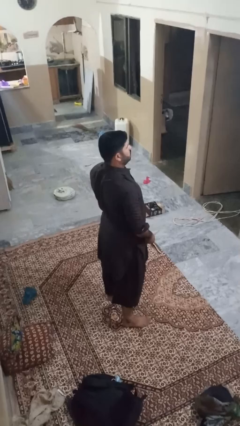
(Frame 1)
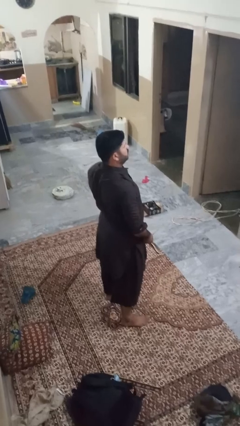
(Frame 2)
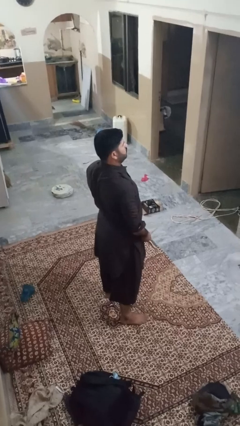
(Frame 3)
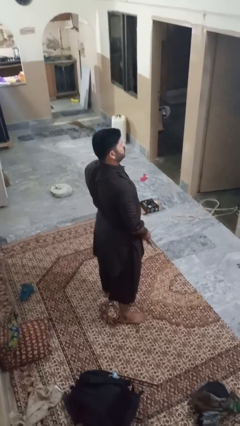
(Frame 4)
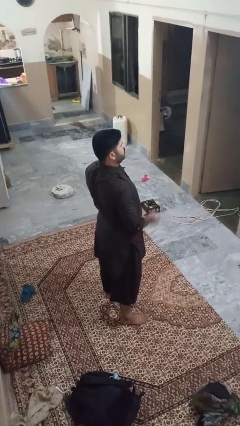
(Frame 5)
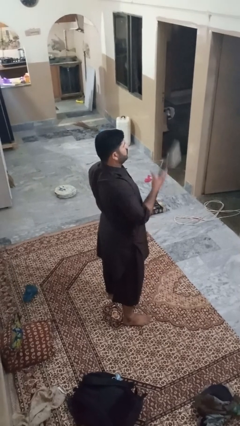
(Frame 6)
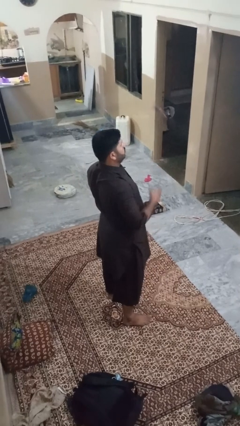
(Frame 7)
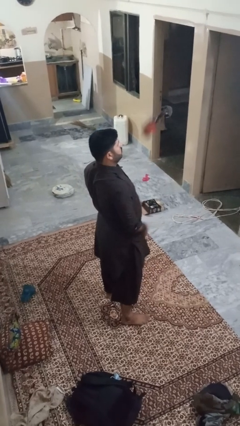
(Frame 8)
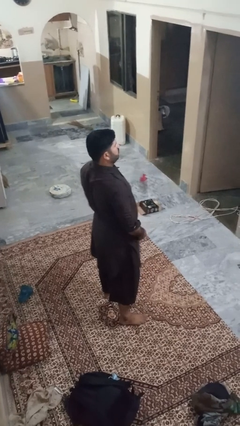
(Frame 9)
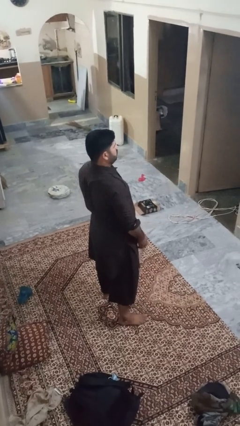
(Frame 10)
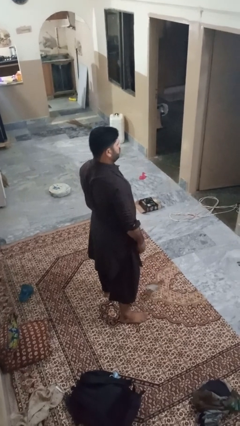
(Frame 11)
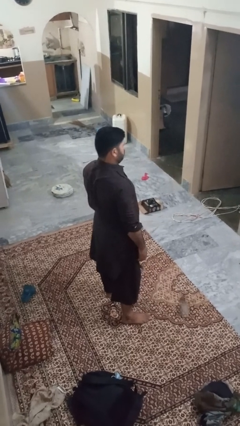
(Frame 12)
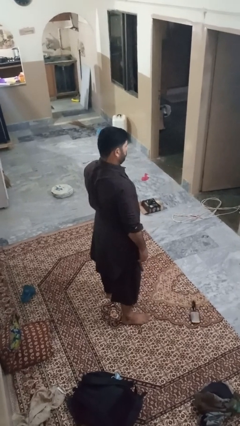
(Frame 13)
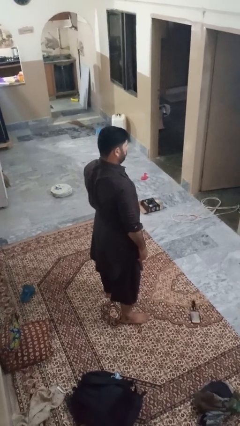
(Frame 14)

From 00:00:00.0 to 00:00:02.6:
person throws object into air

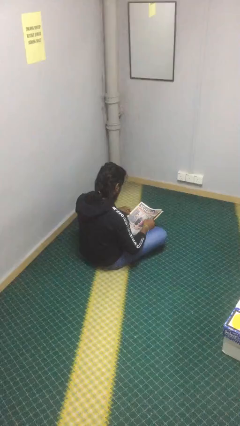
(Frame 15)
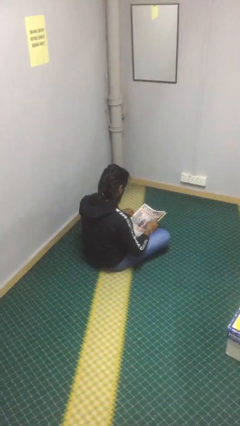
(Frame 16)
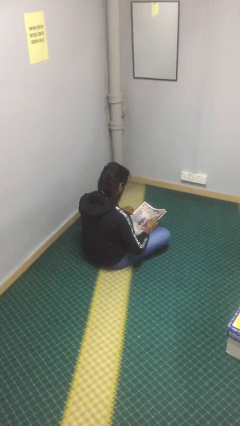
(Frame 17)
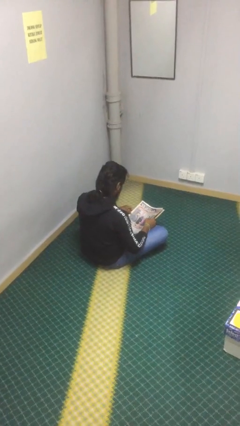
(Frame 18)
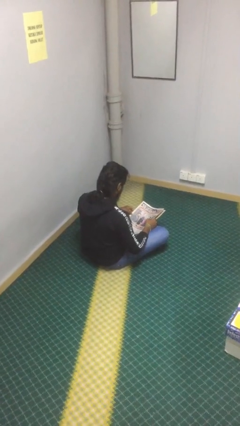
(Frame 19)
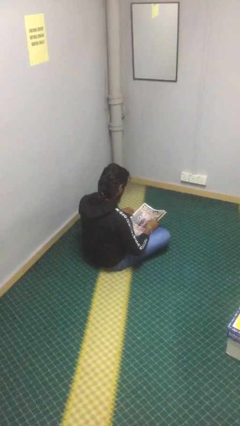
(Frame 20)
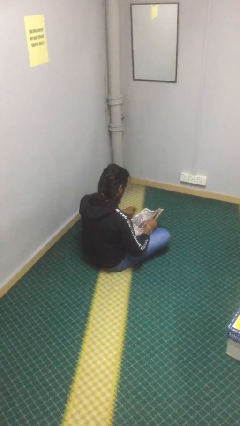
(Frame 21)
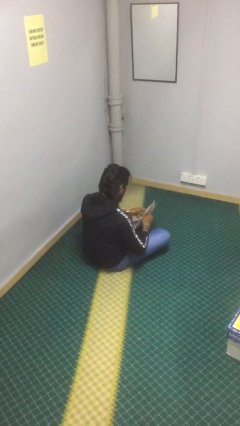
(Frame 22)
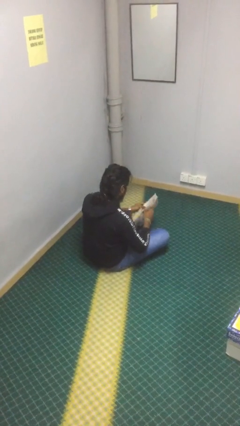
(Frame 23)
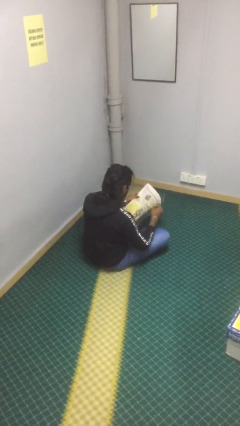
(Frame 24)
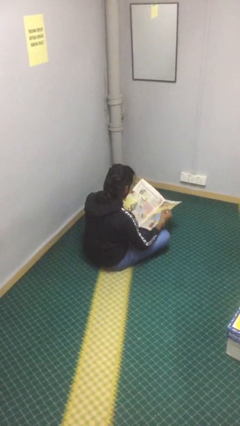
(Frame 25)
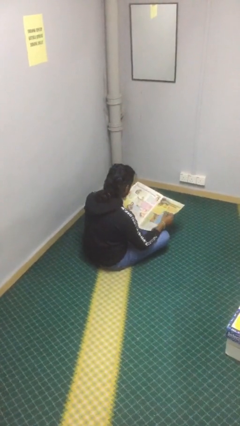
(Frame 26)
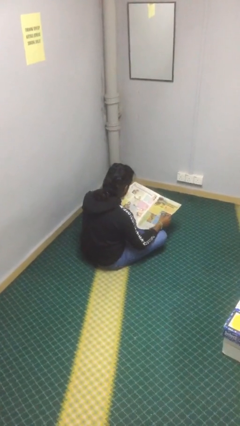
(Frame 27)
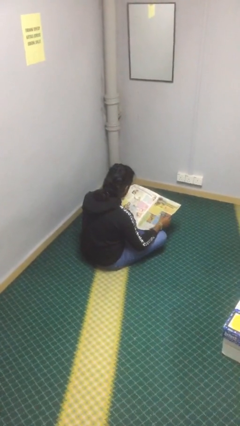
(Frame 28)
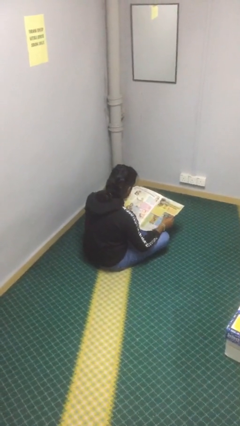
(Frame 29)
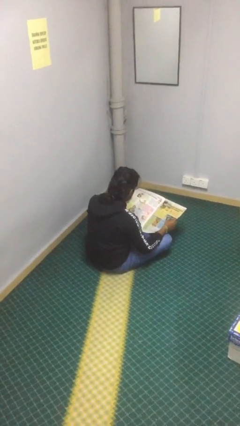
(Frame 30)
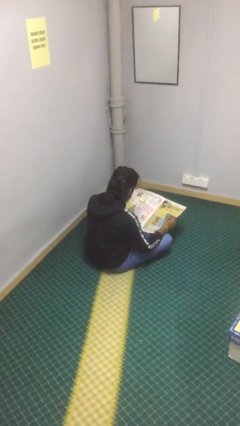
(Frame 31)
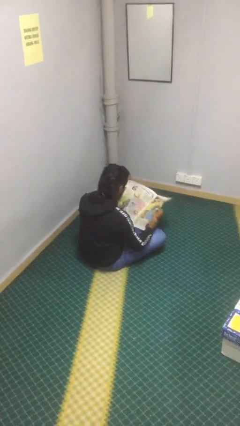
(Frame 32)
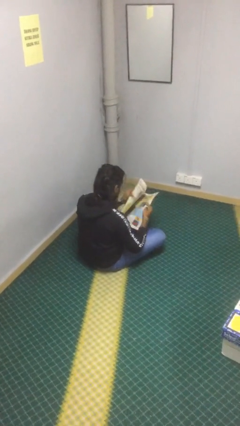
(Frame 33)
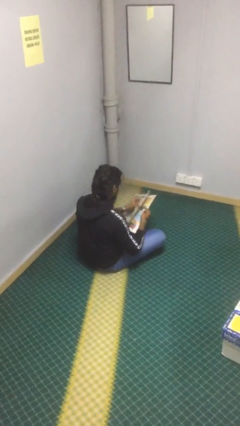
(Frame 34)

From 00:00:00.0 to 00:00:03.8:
person reads newspaper

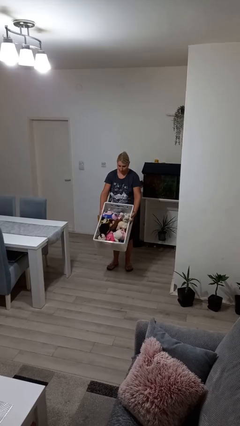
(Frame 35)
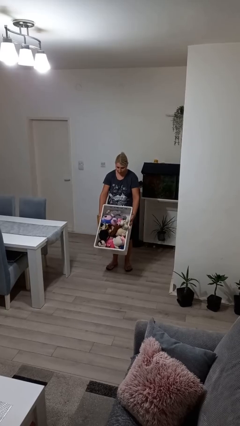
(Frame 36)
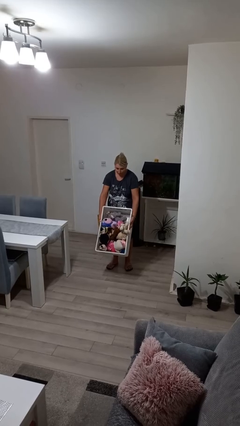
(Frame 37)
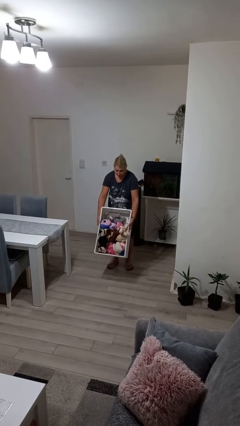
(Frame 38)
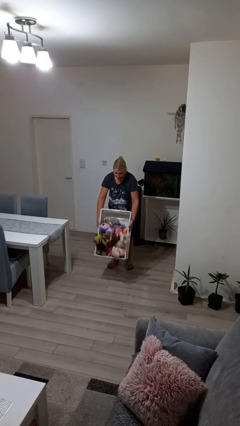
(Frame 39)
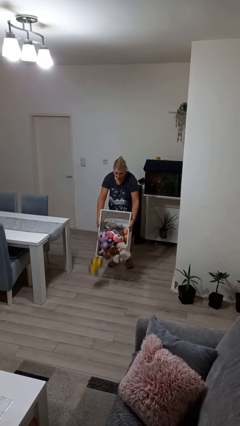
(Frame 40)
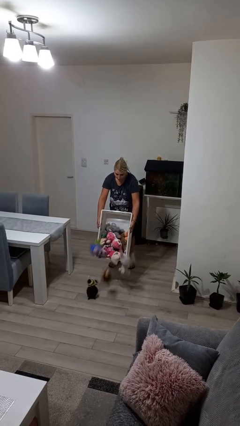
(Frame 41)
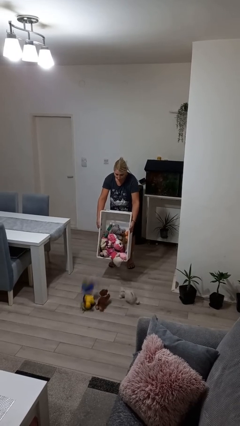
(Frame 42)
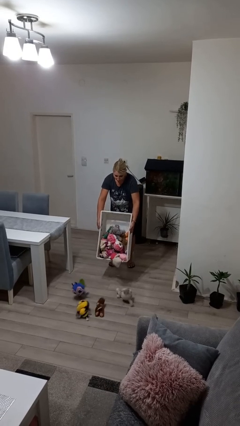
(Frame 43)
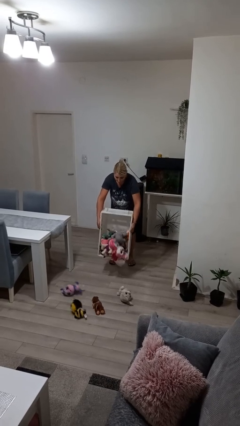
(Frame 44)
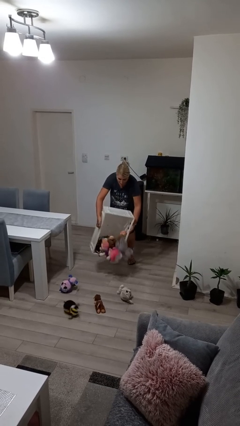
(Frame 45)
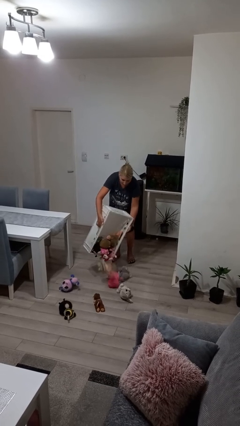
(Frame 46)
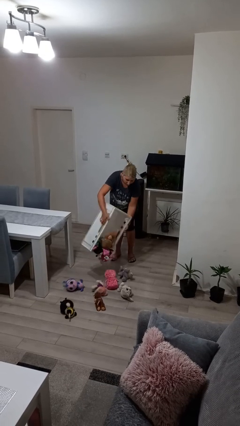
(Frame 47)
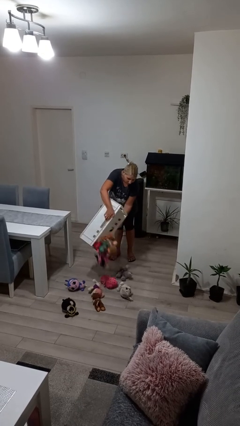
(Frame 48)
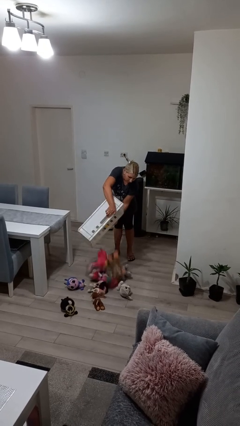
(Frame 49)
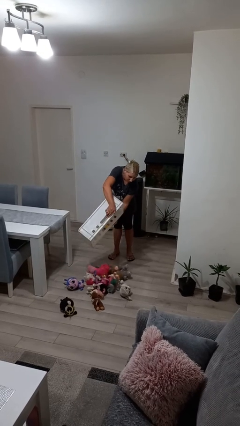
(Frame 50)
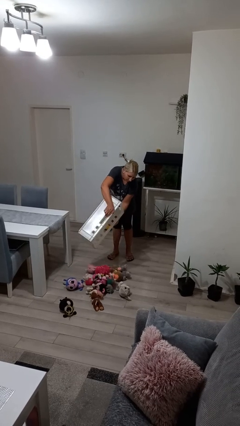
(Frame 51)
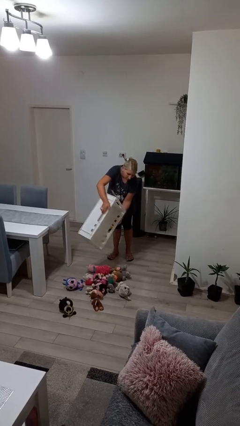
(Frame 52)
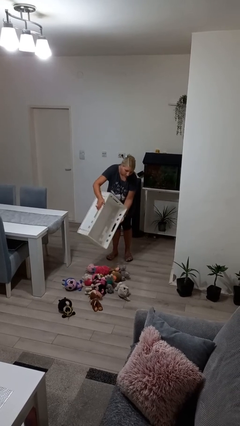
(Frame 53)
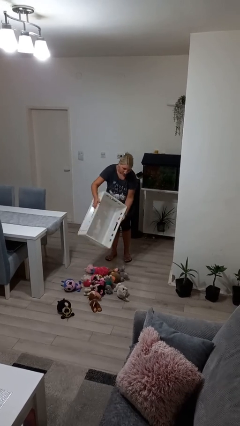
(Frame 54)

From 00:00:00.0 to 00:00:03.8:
person unloads box onto floor

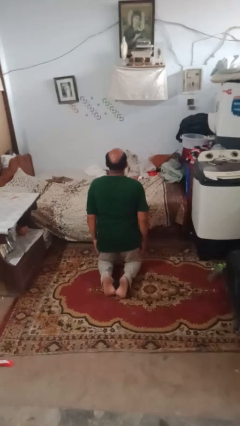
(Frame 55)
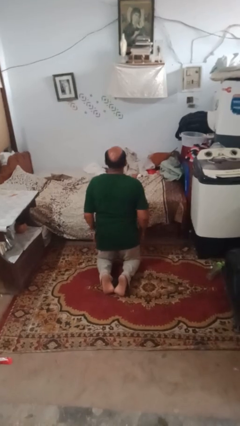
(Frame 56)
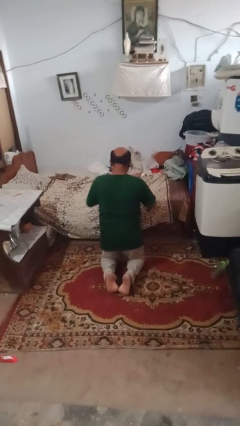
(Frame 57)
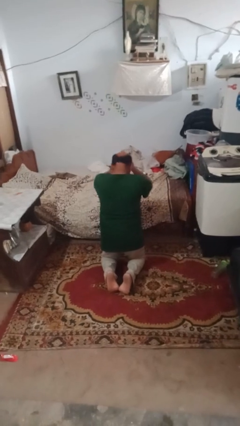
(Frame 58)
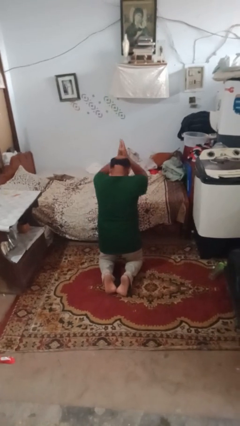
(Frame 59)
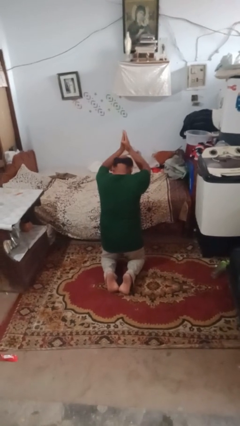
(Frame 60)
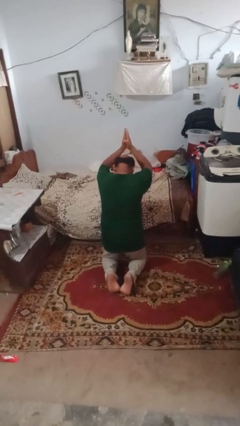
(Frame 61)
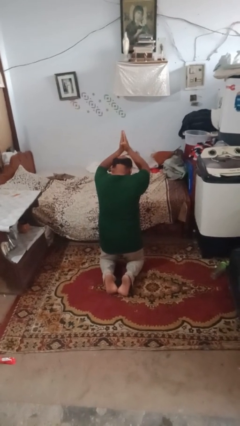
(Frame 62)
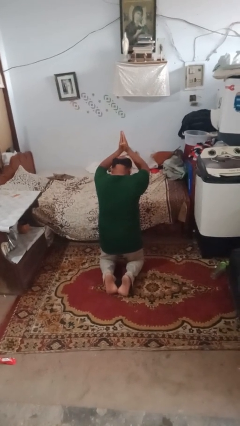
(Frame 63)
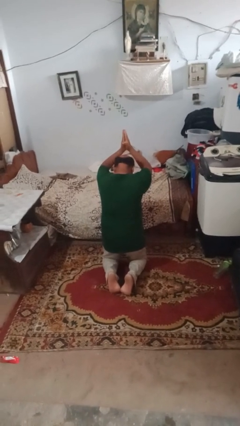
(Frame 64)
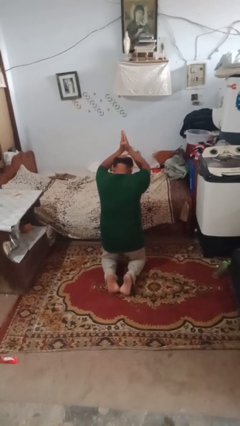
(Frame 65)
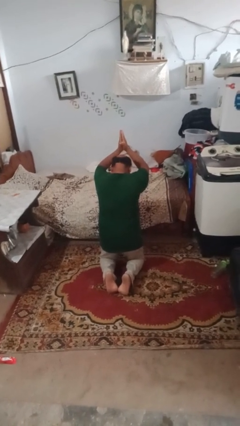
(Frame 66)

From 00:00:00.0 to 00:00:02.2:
person prays

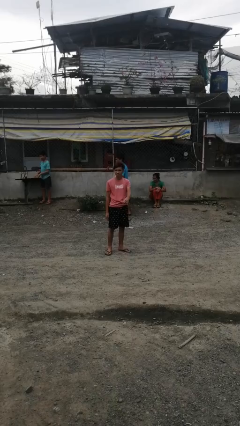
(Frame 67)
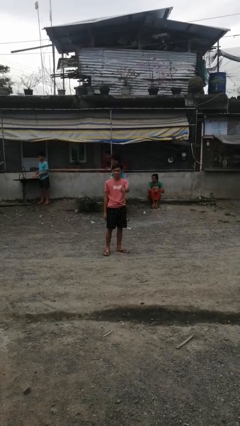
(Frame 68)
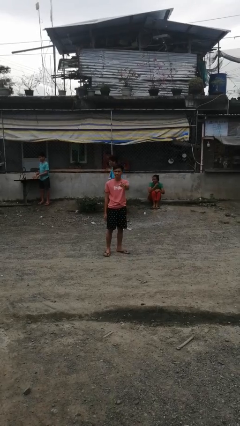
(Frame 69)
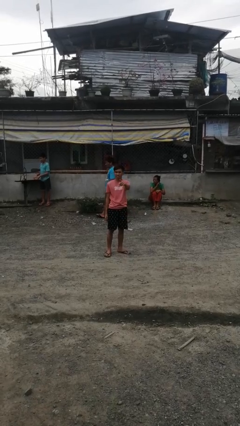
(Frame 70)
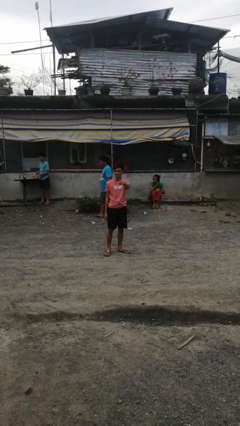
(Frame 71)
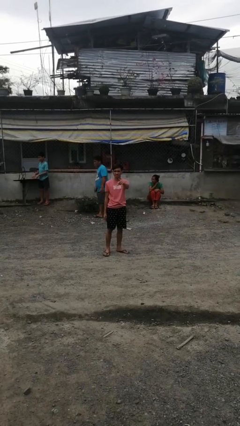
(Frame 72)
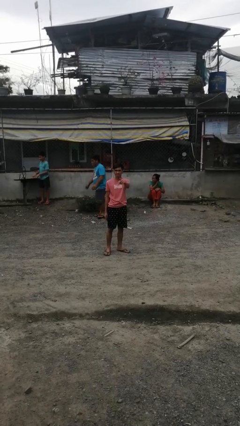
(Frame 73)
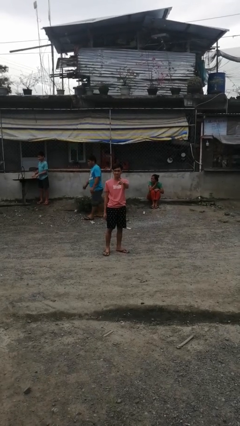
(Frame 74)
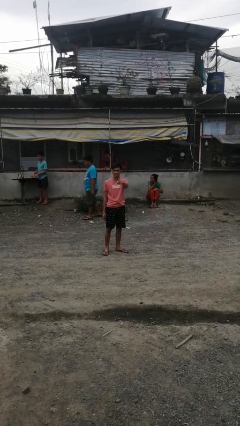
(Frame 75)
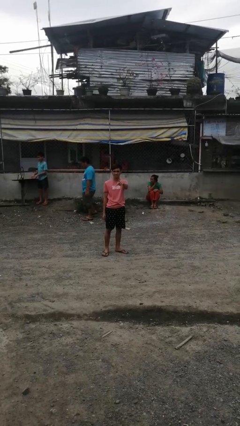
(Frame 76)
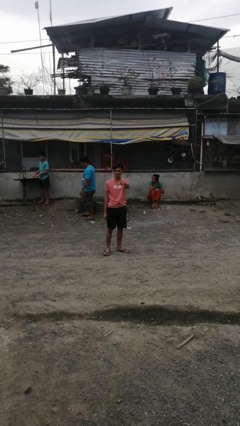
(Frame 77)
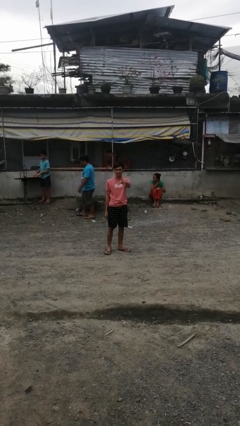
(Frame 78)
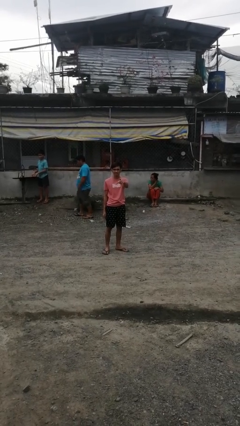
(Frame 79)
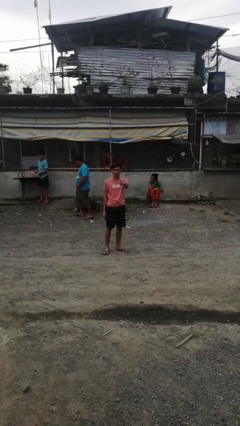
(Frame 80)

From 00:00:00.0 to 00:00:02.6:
person points at person

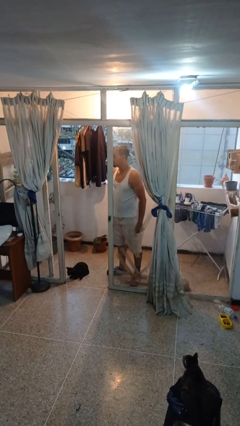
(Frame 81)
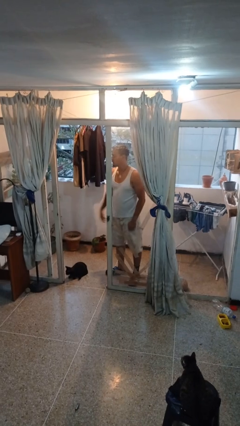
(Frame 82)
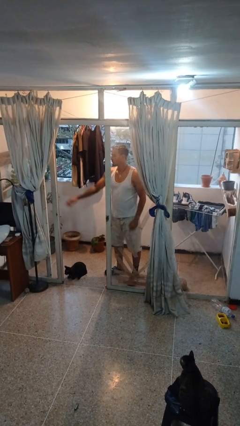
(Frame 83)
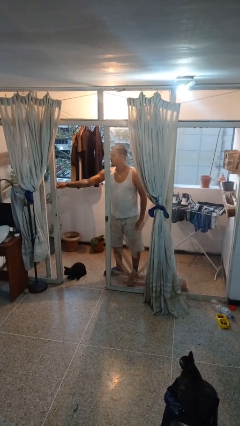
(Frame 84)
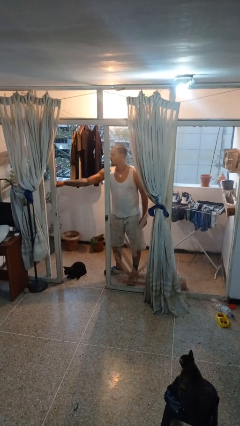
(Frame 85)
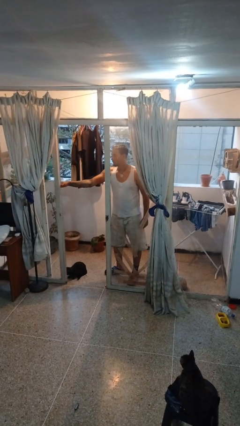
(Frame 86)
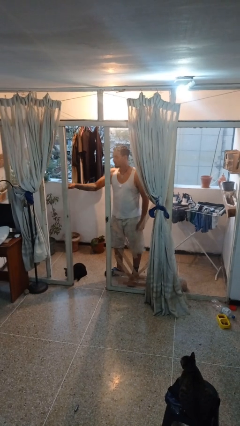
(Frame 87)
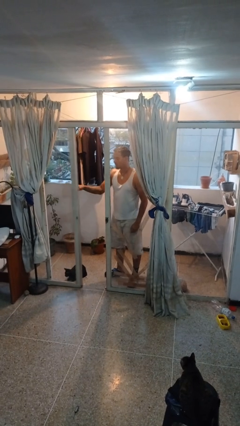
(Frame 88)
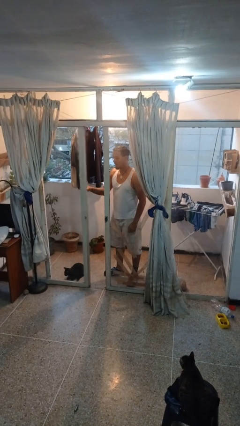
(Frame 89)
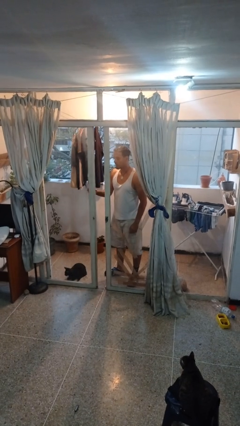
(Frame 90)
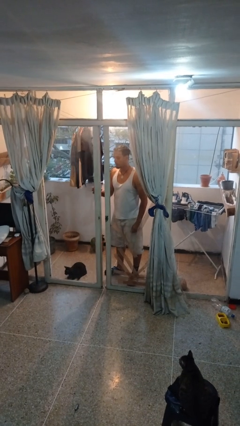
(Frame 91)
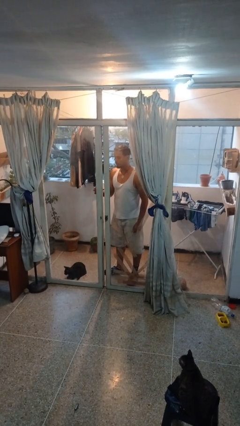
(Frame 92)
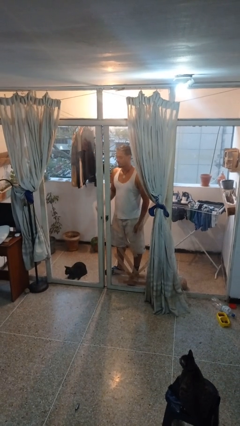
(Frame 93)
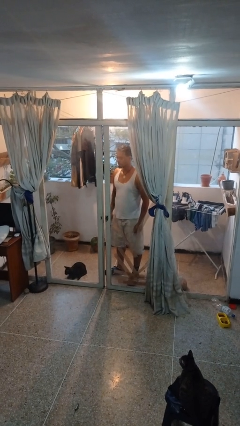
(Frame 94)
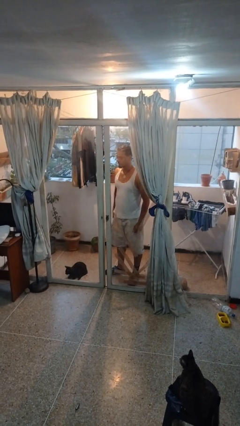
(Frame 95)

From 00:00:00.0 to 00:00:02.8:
person closes sliding door
